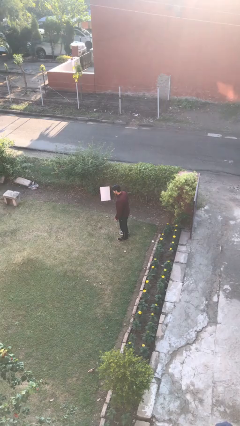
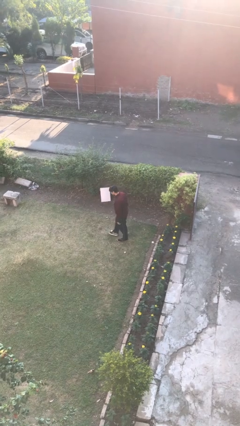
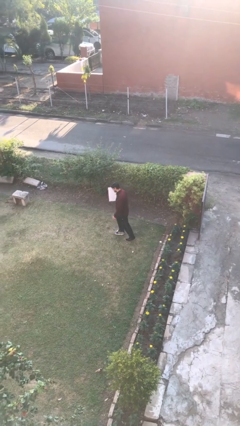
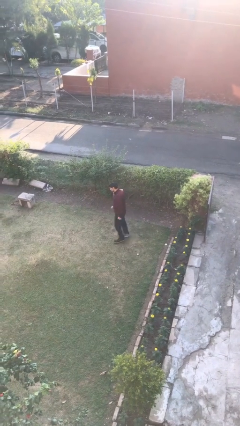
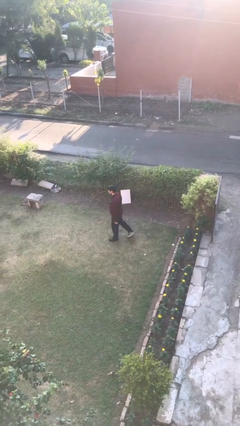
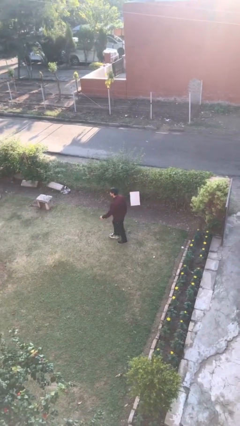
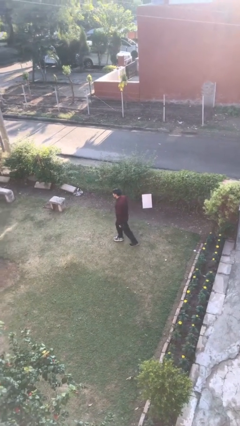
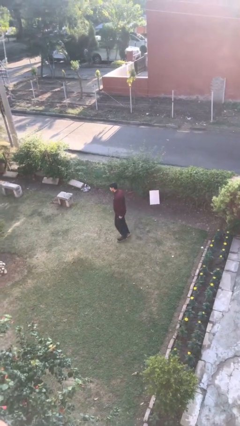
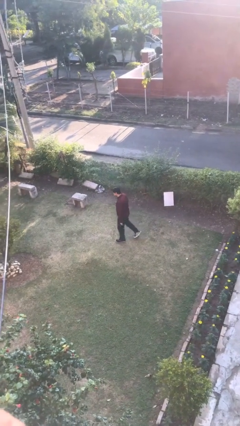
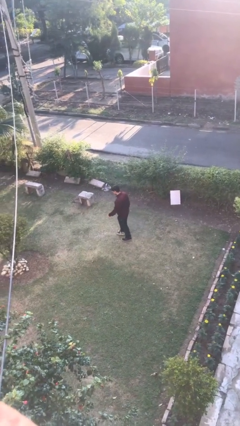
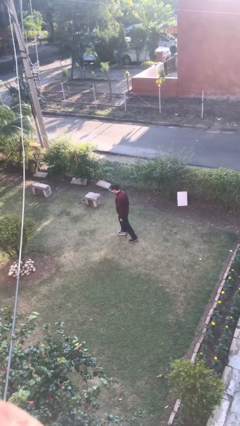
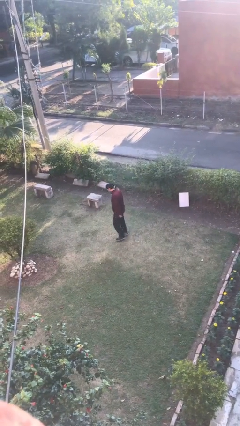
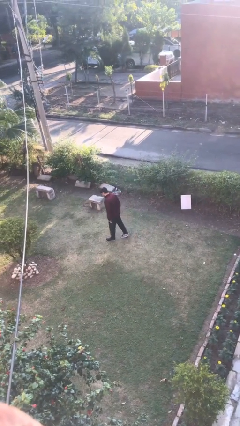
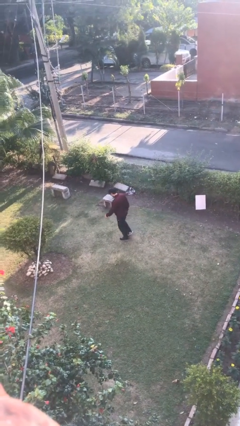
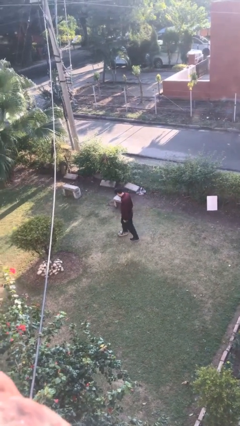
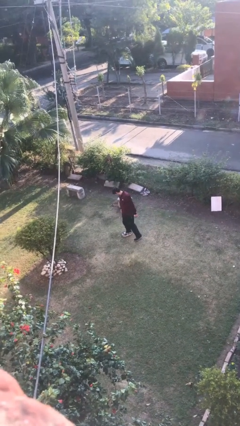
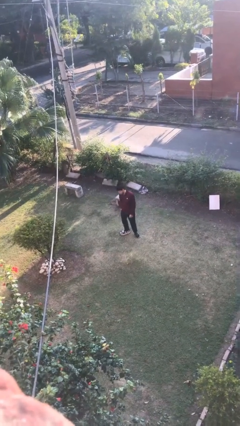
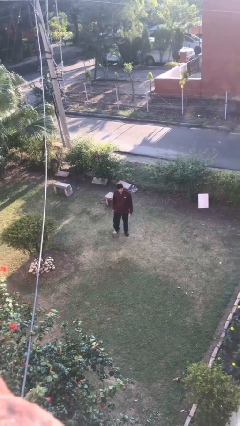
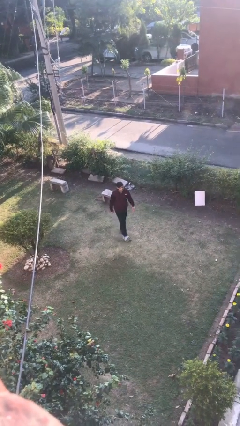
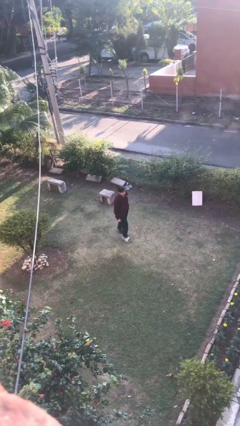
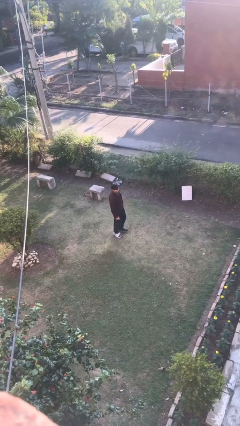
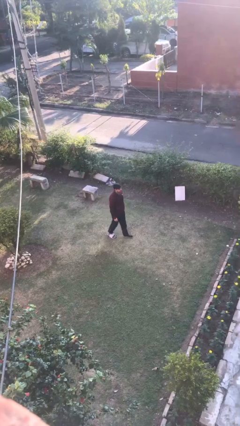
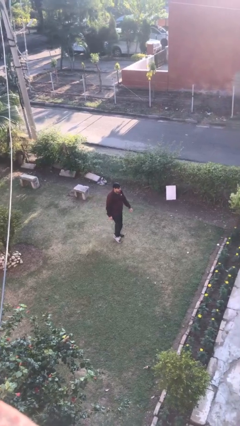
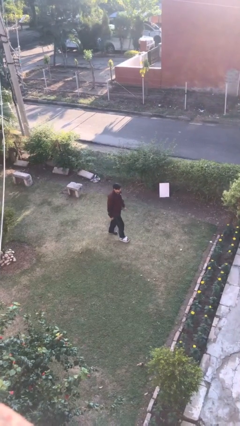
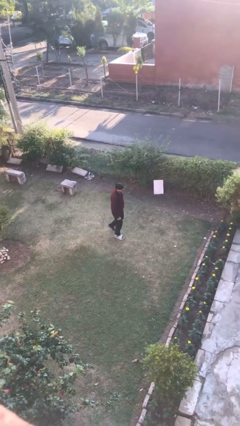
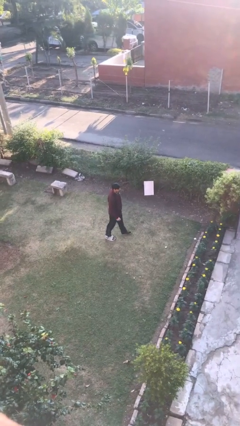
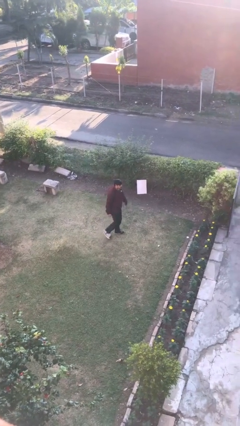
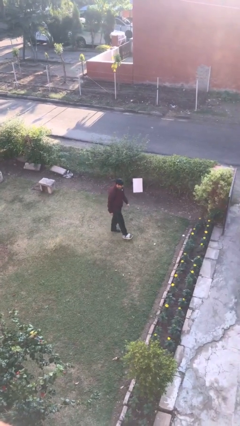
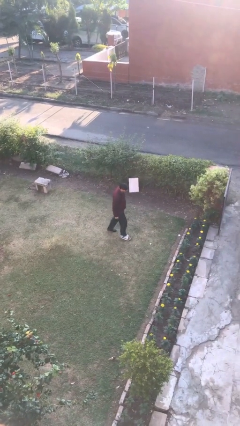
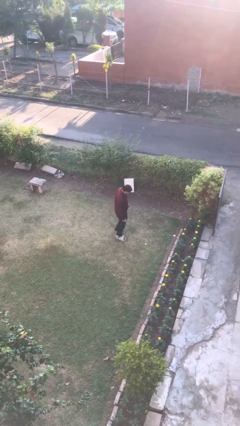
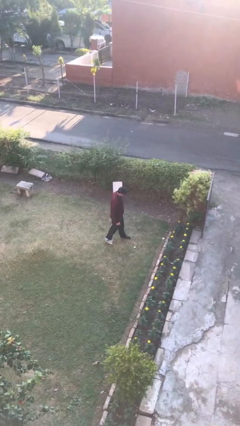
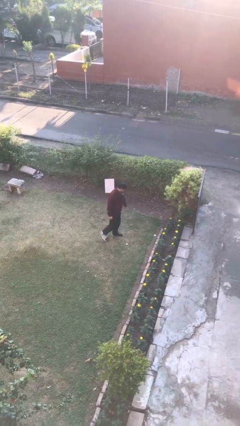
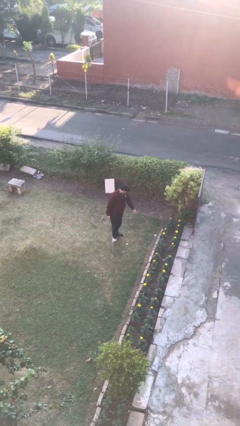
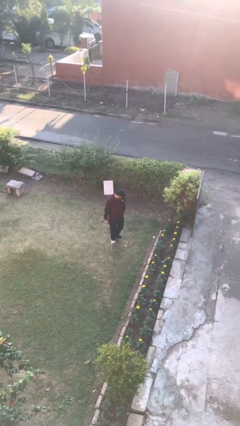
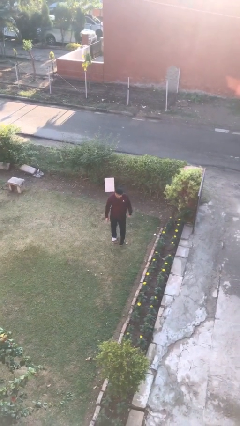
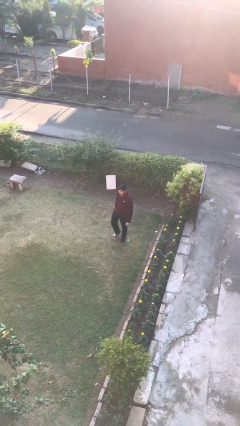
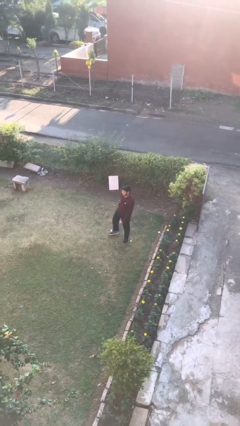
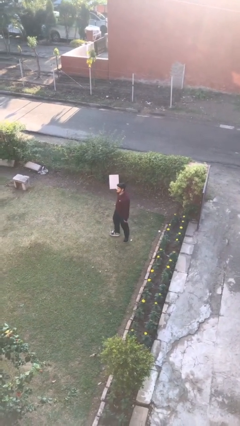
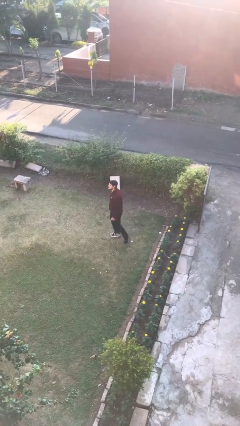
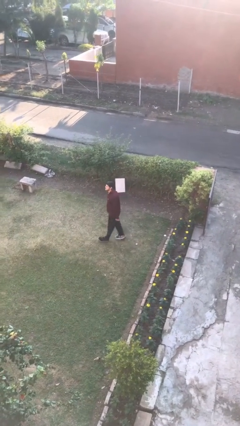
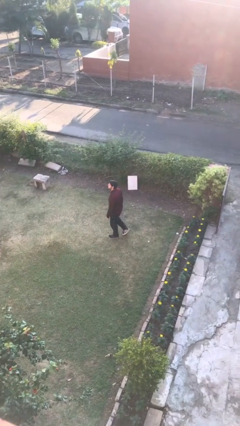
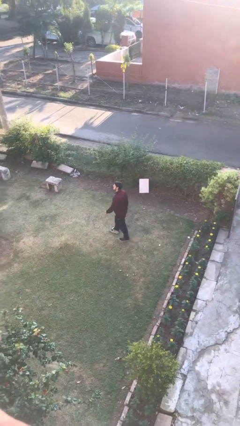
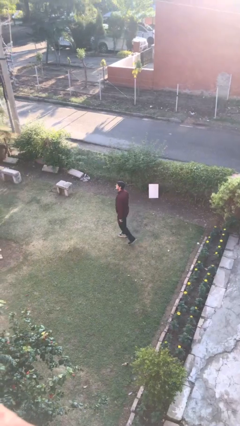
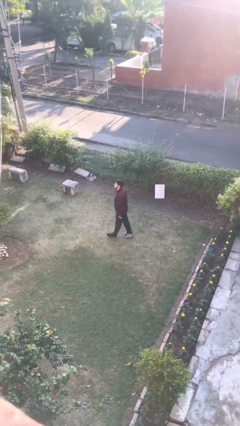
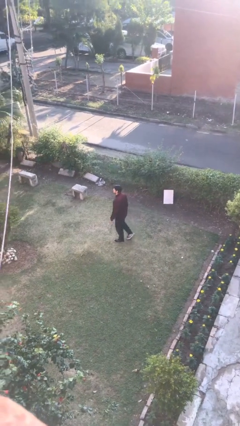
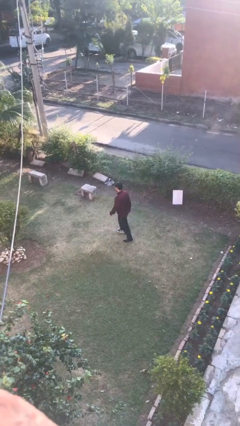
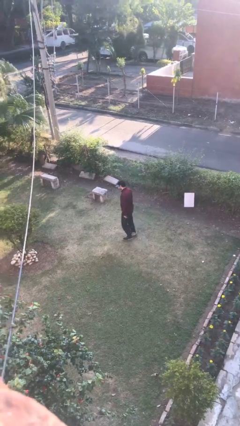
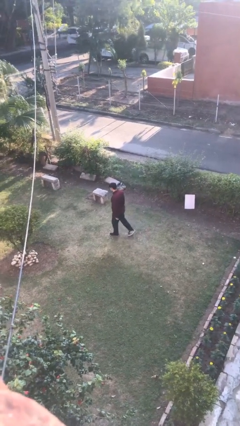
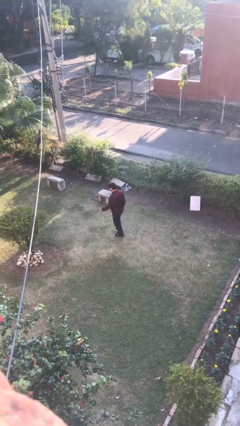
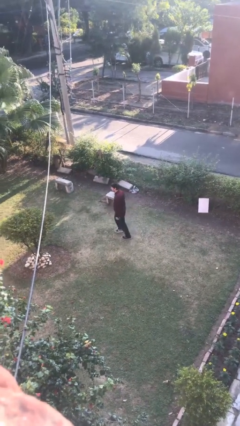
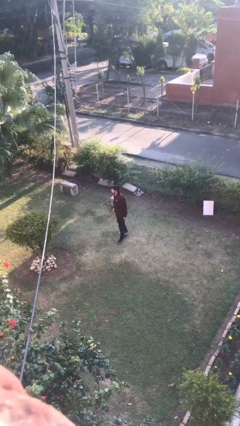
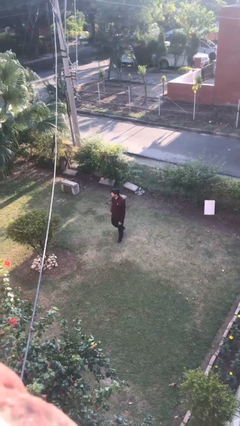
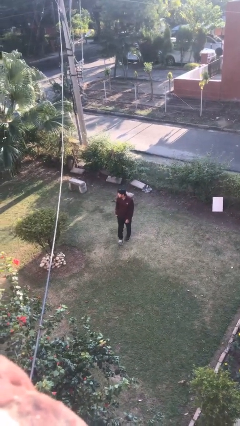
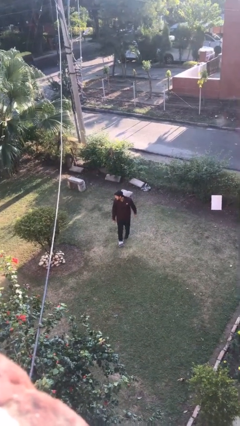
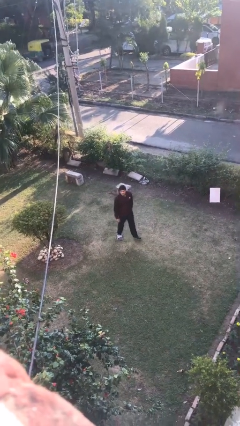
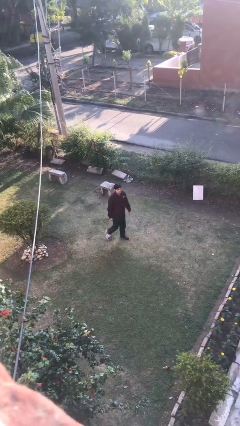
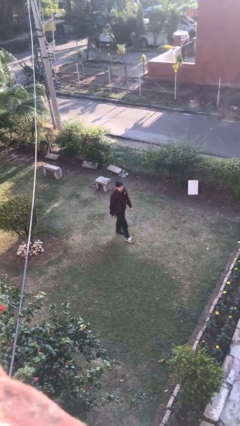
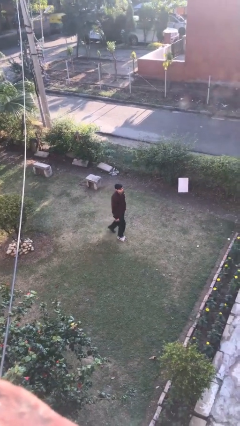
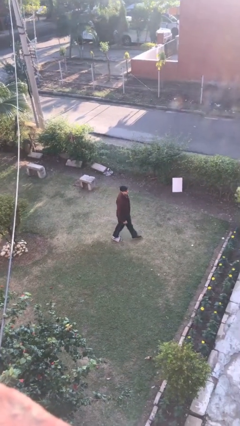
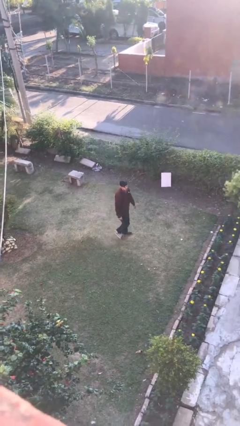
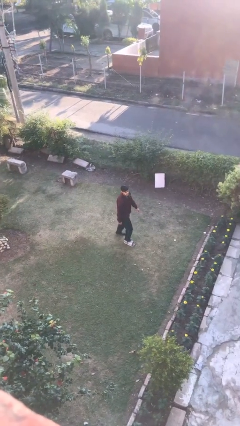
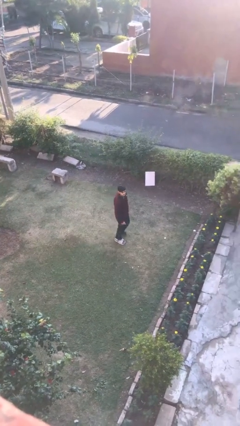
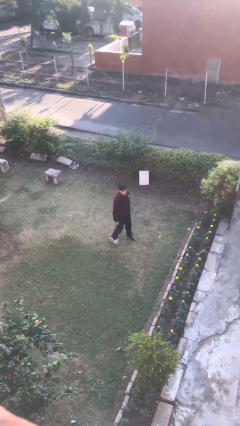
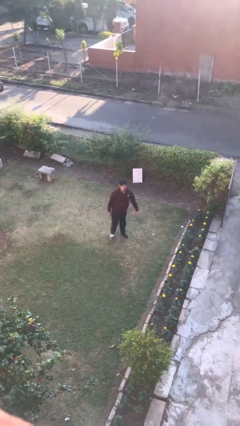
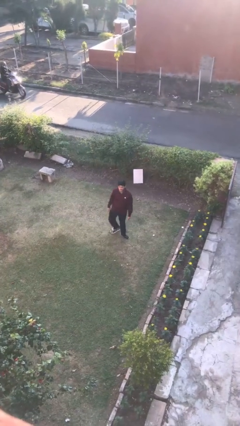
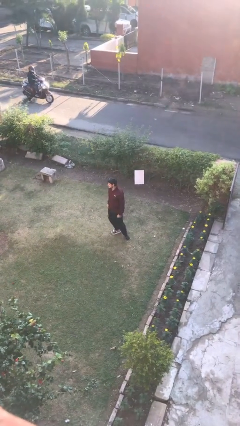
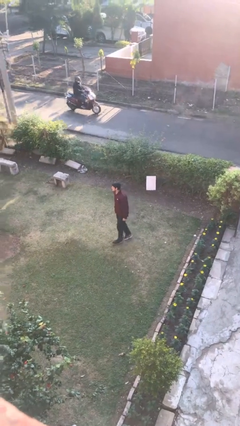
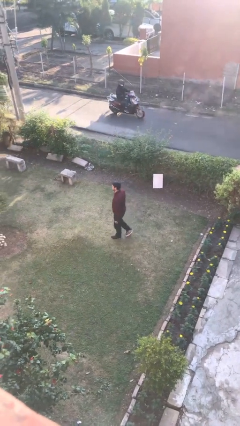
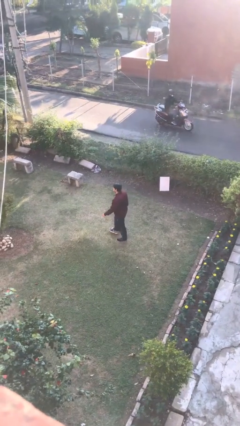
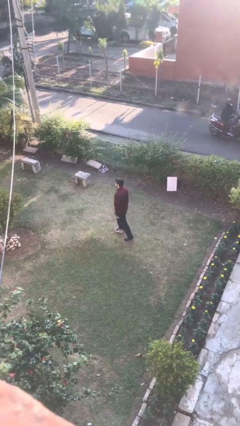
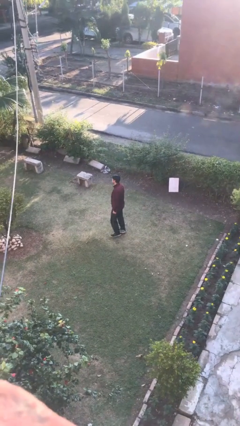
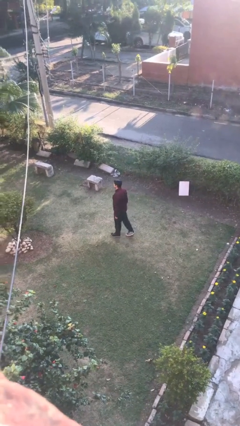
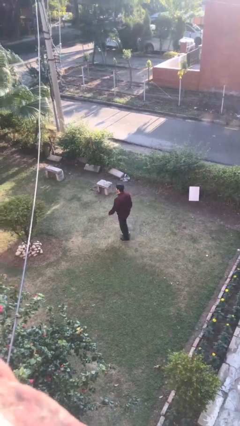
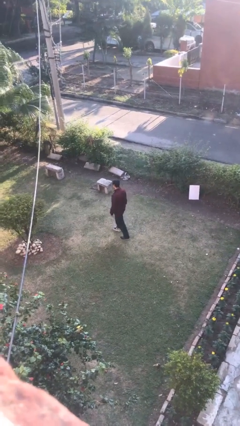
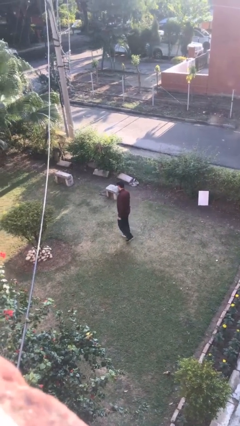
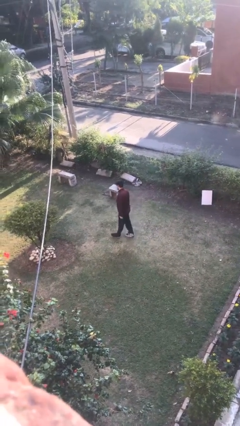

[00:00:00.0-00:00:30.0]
person walks

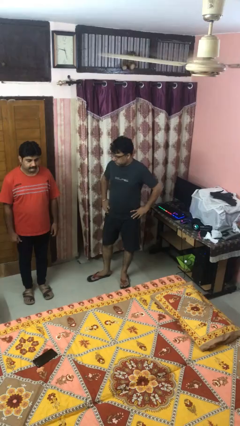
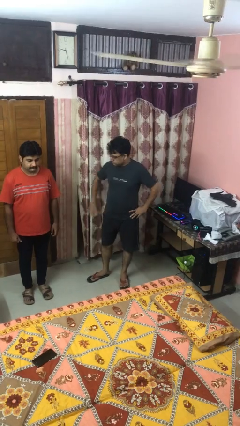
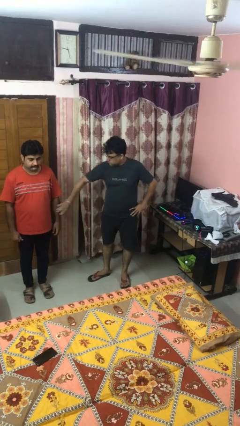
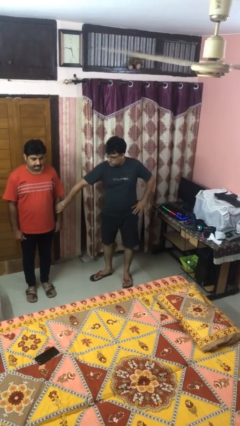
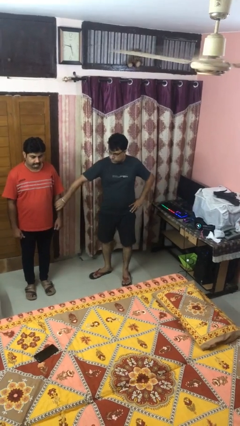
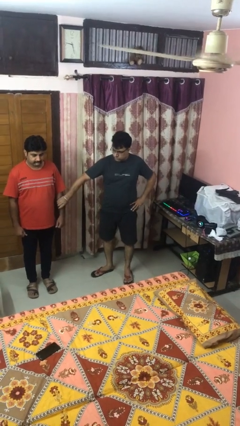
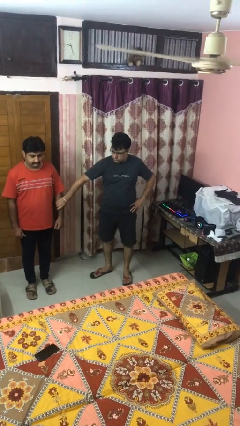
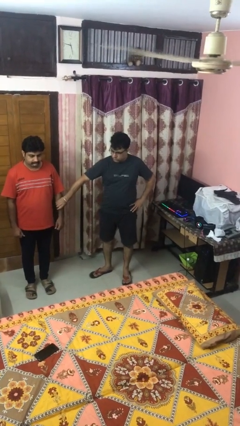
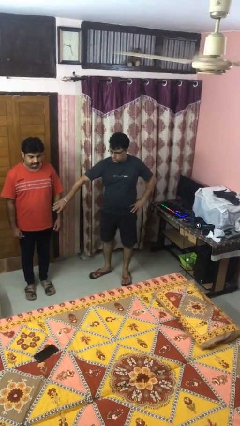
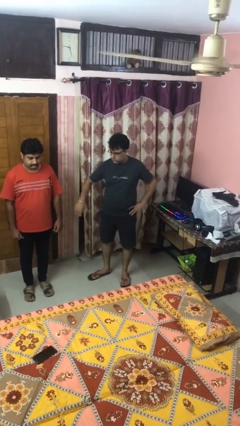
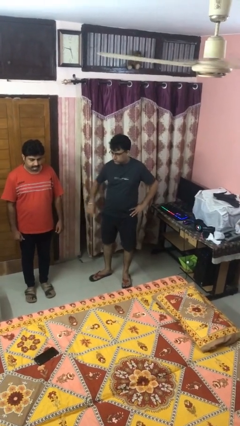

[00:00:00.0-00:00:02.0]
person grabs person by forearm

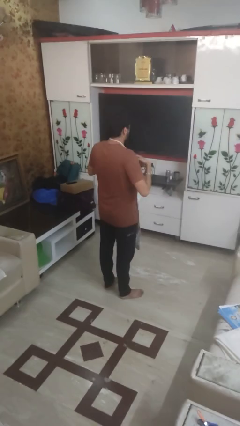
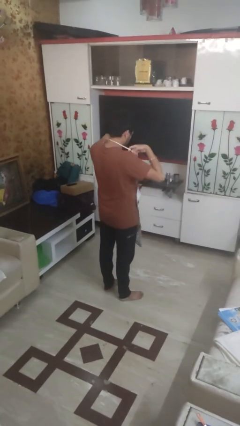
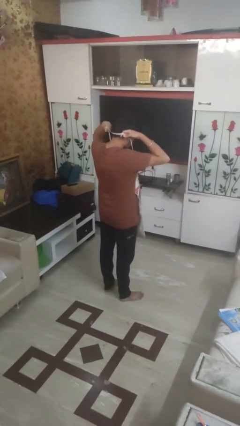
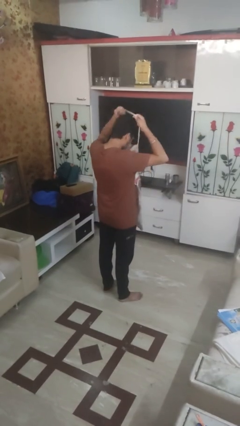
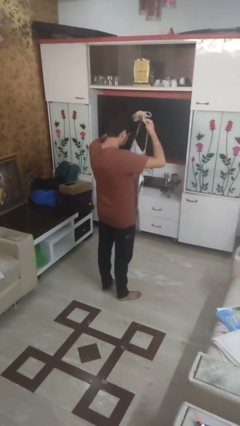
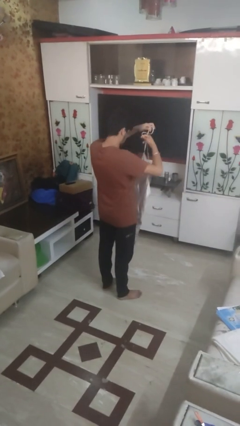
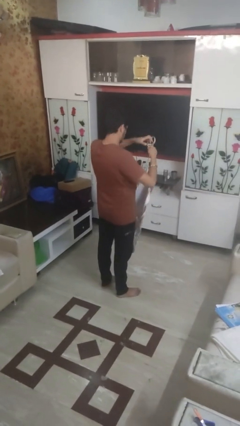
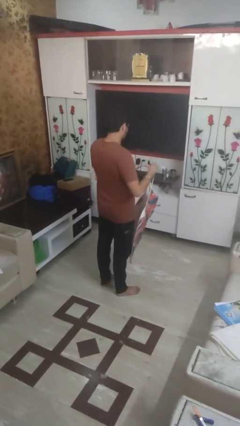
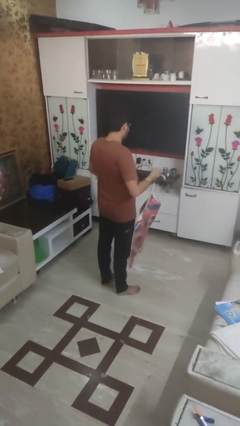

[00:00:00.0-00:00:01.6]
person takes off apron
